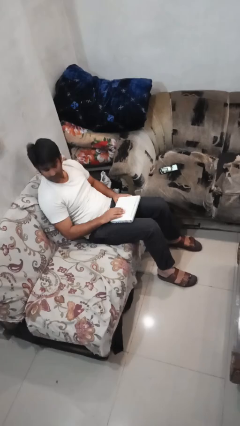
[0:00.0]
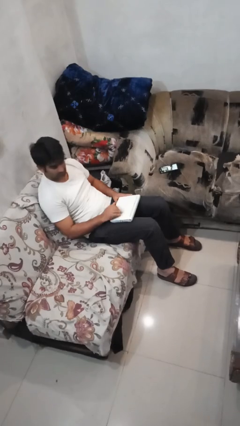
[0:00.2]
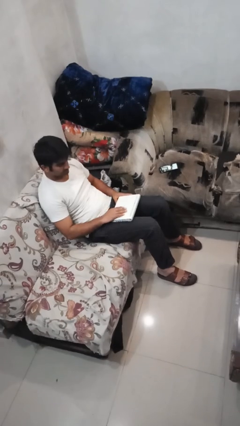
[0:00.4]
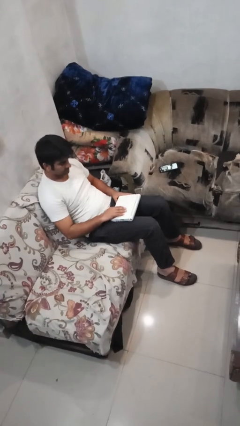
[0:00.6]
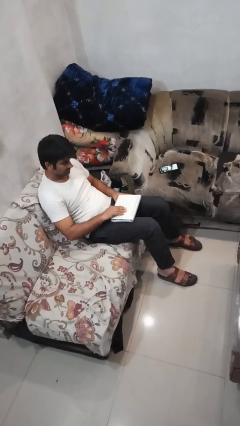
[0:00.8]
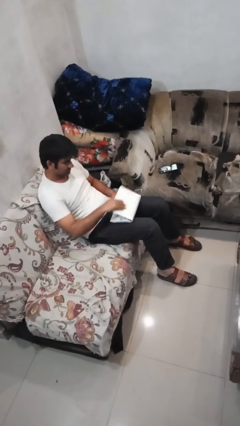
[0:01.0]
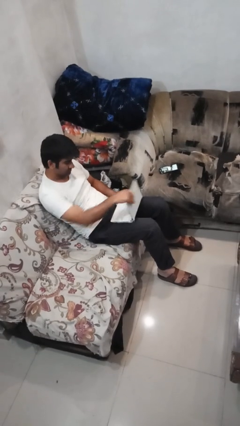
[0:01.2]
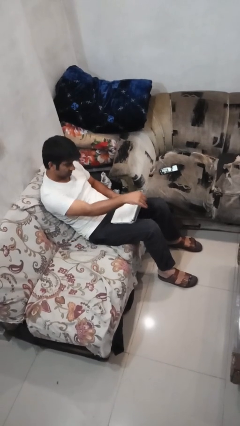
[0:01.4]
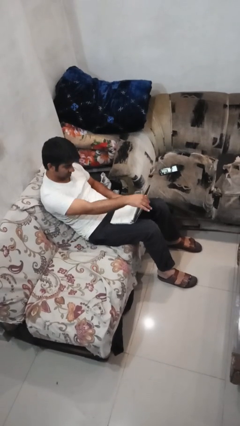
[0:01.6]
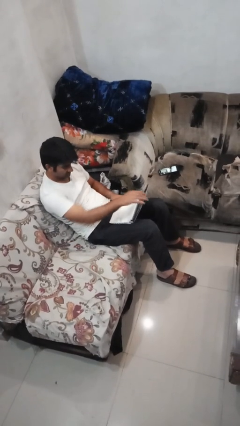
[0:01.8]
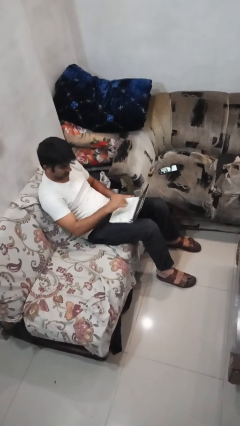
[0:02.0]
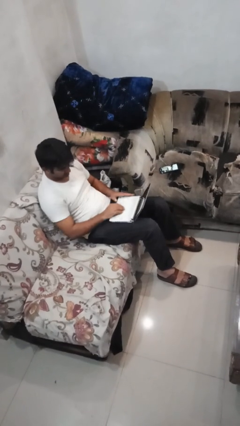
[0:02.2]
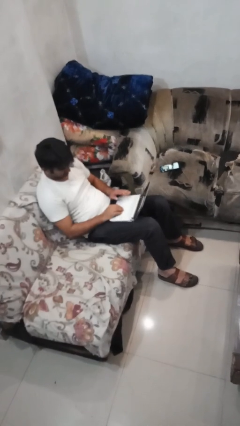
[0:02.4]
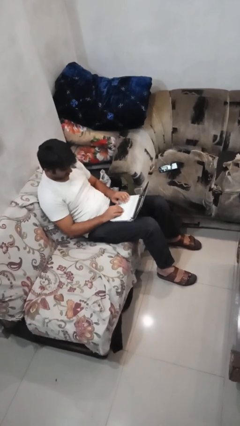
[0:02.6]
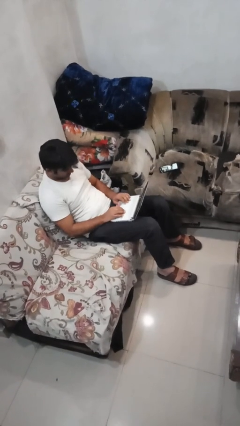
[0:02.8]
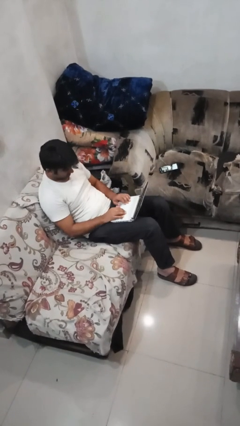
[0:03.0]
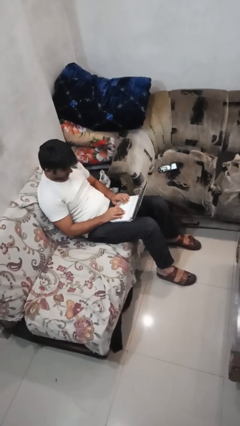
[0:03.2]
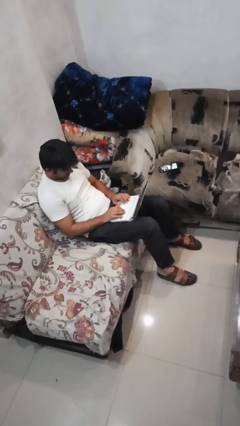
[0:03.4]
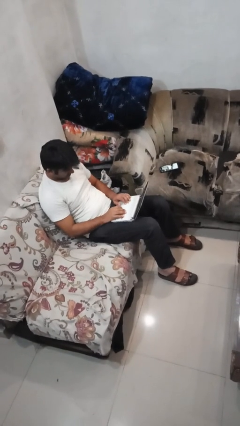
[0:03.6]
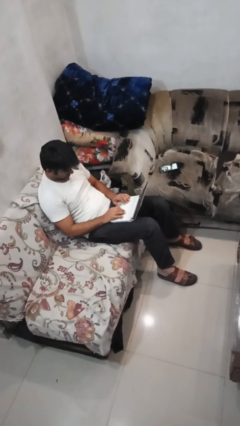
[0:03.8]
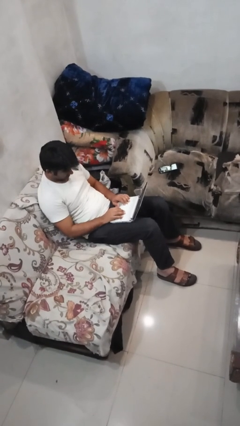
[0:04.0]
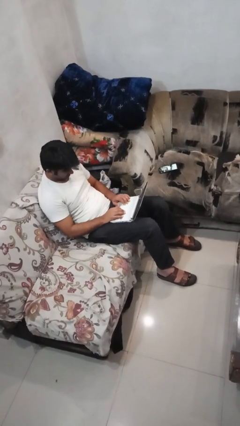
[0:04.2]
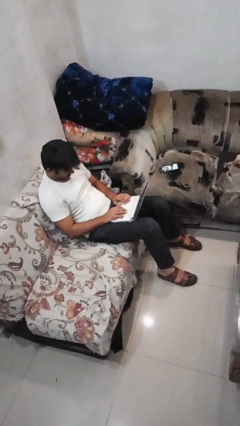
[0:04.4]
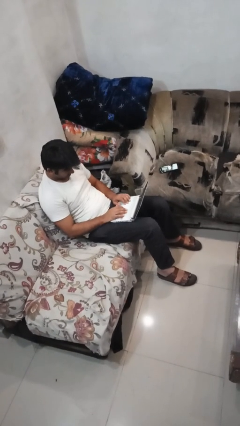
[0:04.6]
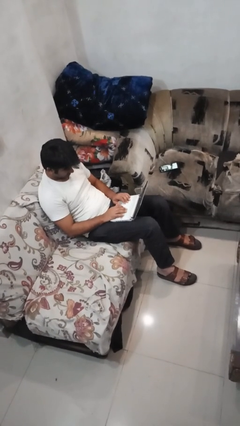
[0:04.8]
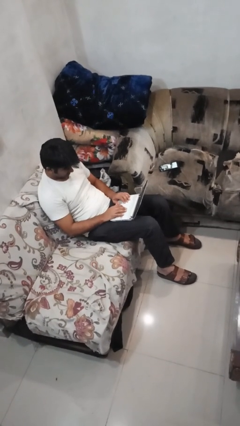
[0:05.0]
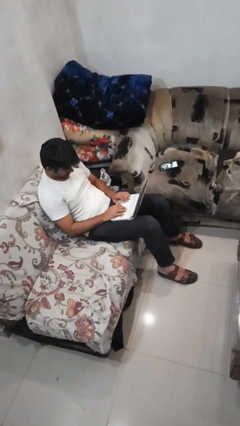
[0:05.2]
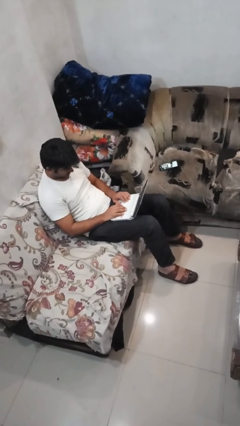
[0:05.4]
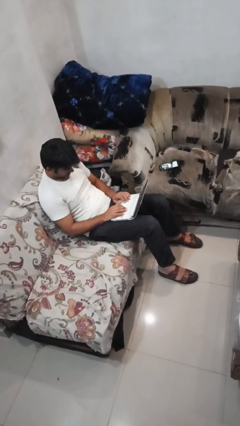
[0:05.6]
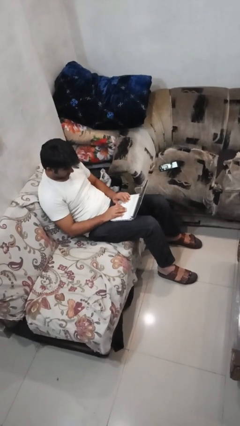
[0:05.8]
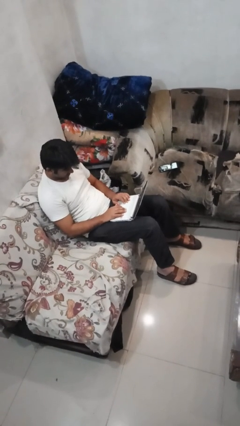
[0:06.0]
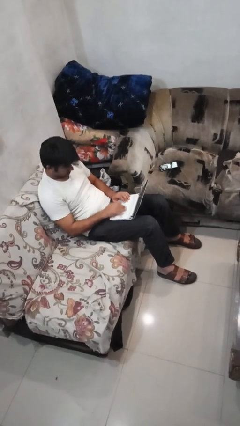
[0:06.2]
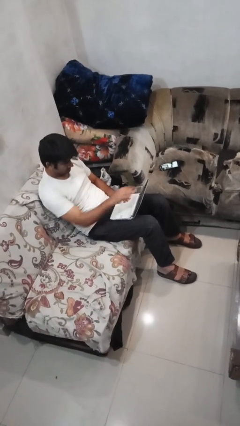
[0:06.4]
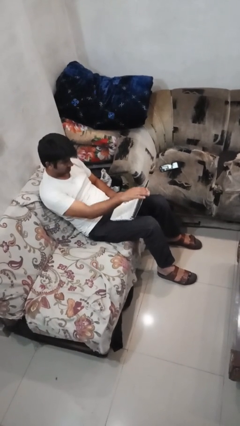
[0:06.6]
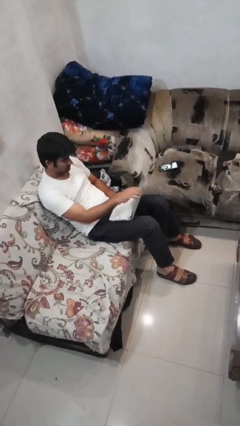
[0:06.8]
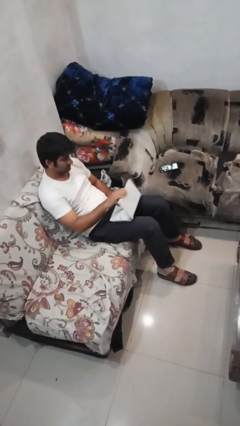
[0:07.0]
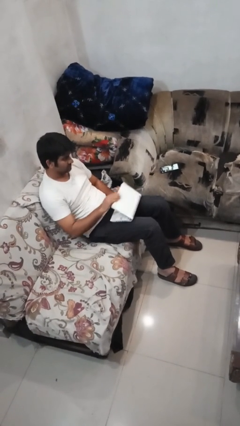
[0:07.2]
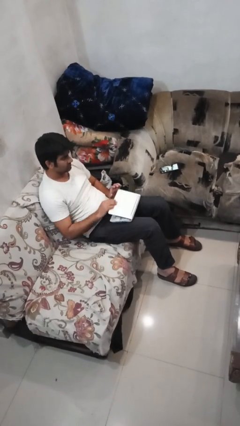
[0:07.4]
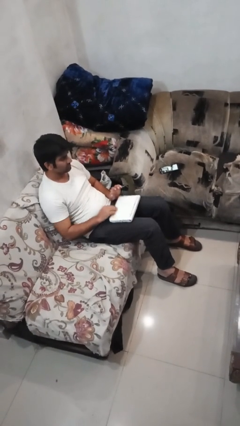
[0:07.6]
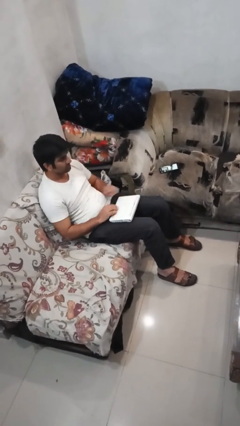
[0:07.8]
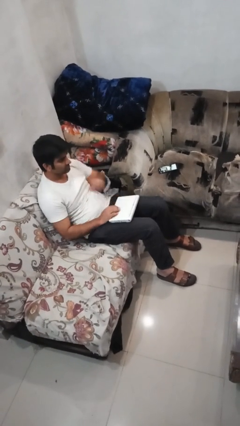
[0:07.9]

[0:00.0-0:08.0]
person interacts with laptop

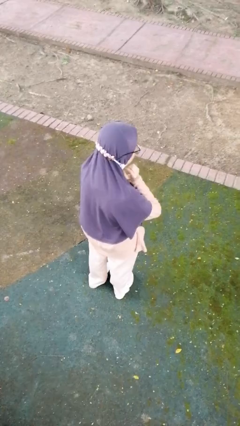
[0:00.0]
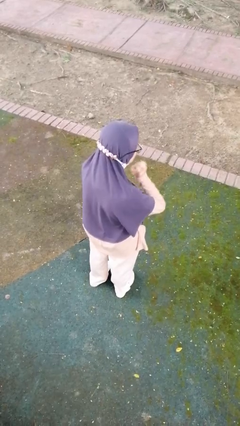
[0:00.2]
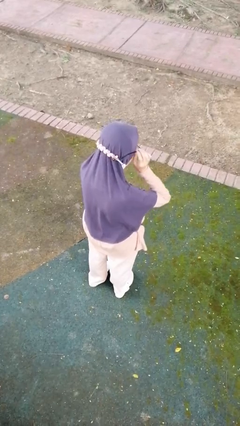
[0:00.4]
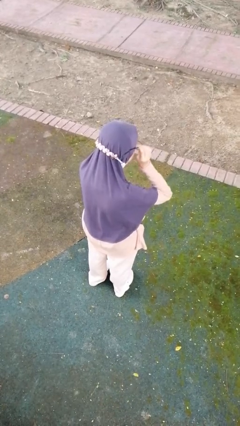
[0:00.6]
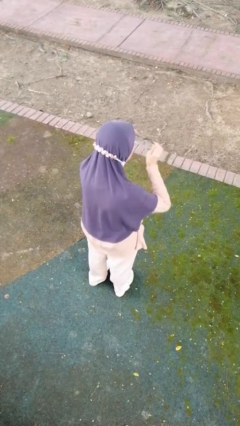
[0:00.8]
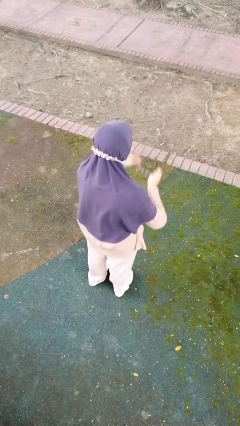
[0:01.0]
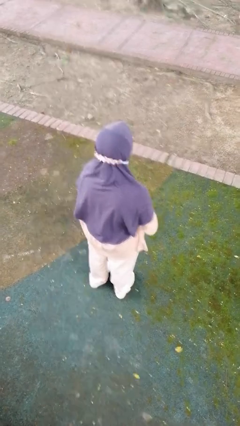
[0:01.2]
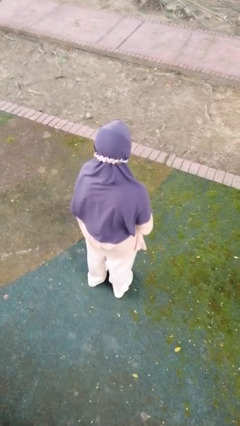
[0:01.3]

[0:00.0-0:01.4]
person takes off glasses

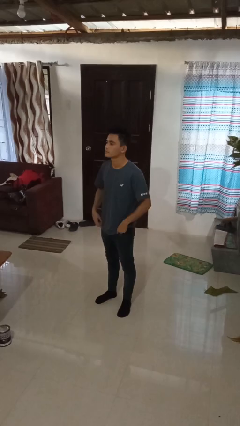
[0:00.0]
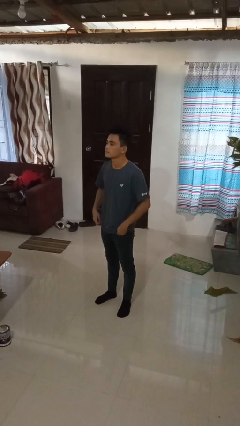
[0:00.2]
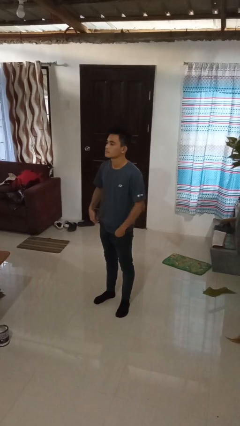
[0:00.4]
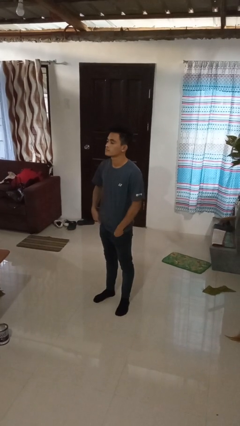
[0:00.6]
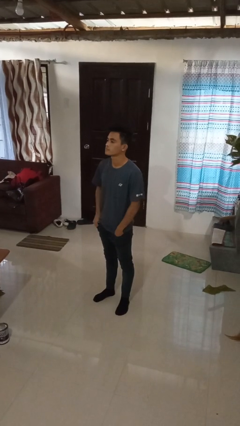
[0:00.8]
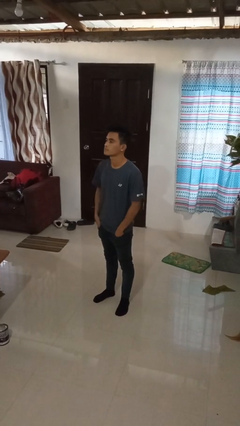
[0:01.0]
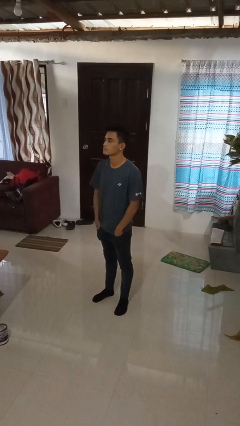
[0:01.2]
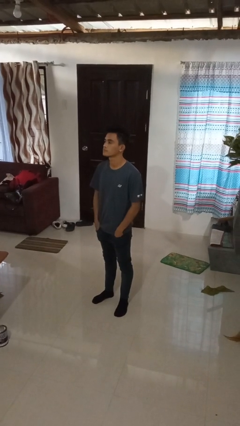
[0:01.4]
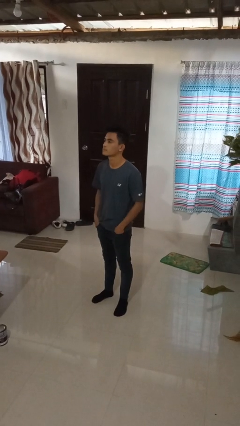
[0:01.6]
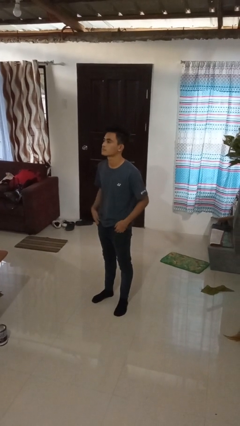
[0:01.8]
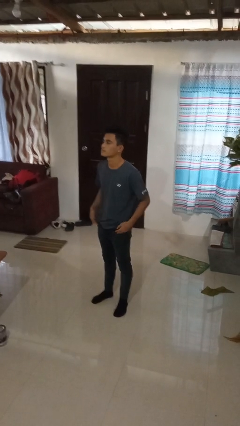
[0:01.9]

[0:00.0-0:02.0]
person puts hands in back pockets

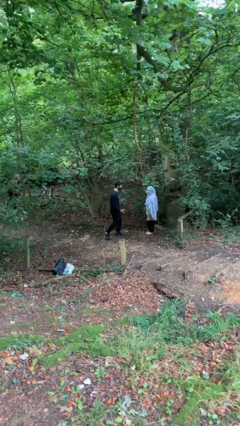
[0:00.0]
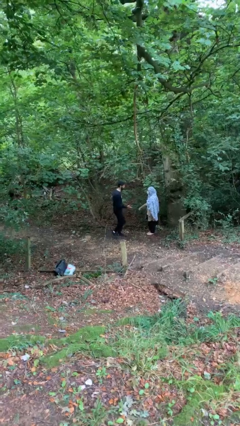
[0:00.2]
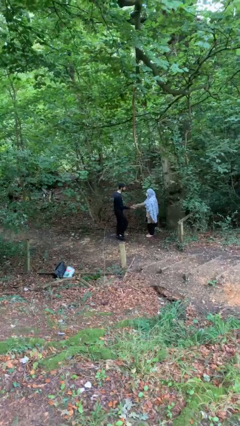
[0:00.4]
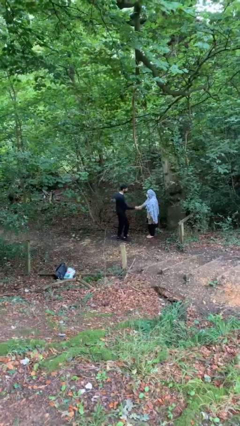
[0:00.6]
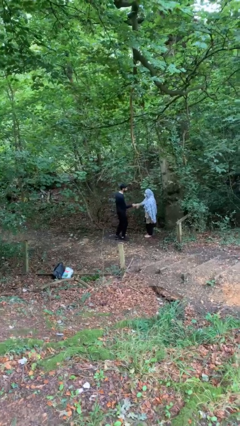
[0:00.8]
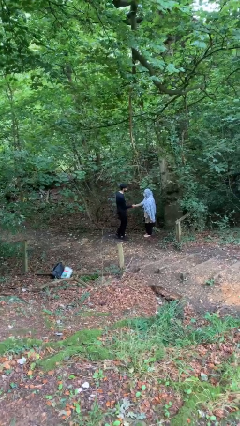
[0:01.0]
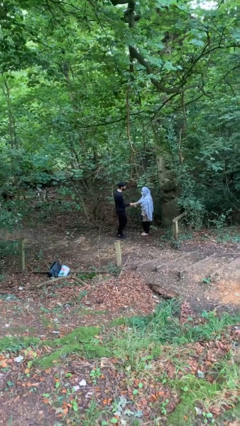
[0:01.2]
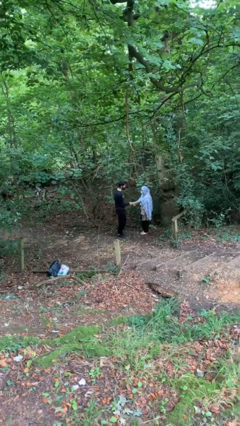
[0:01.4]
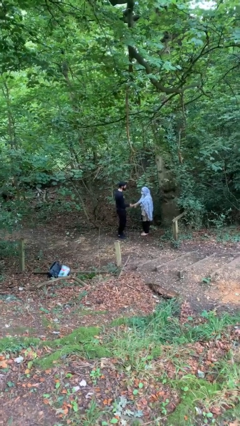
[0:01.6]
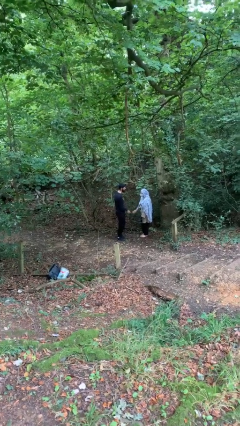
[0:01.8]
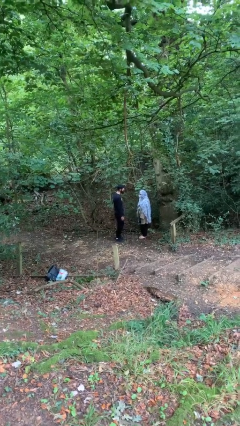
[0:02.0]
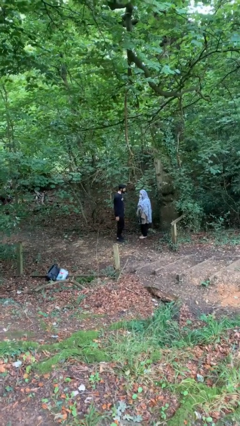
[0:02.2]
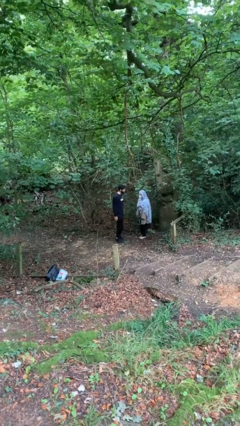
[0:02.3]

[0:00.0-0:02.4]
person shakes hand

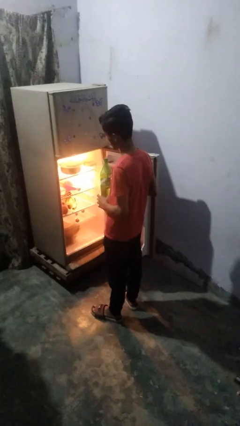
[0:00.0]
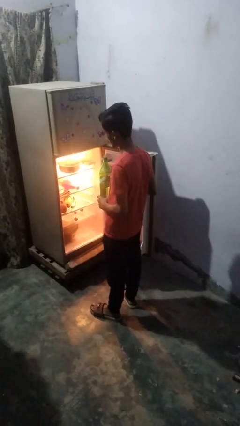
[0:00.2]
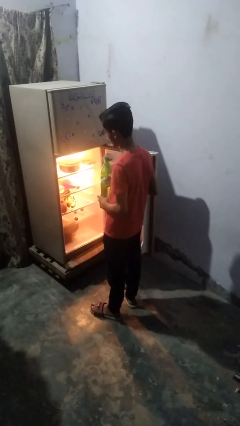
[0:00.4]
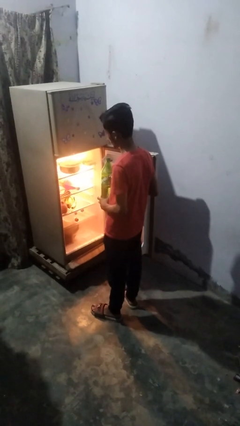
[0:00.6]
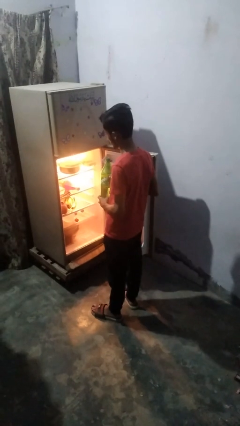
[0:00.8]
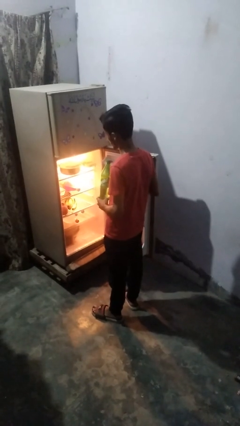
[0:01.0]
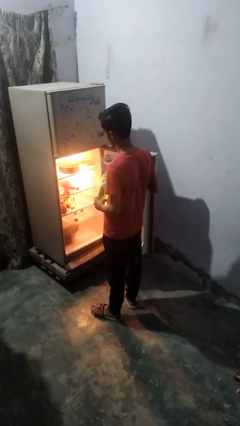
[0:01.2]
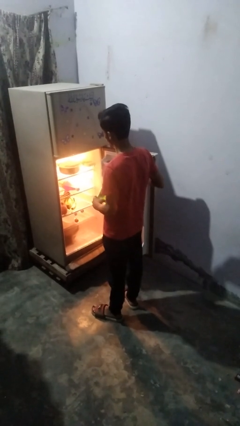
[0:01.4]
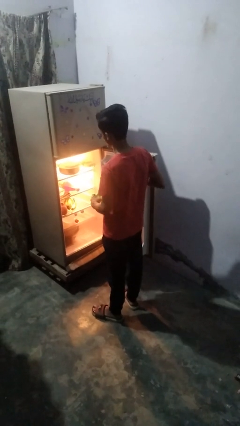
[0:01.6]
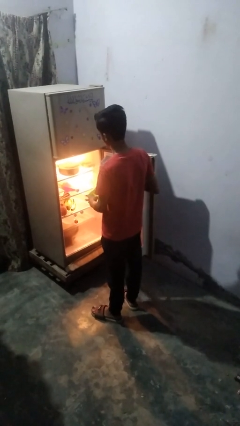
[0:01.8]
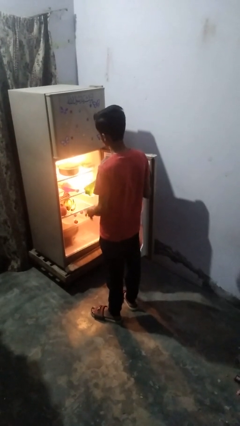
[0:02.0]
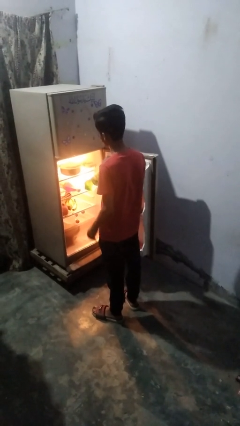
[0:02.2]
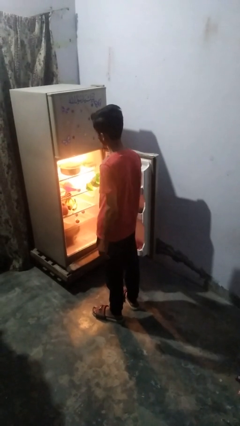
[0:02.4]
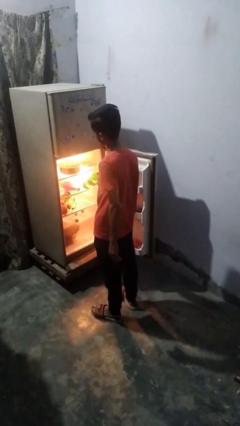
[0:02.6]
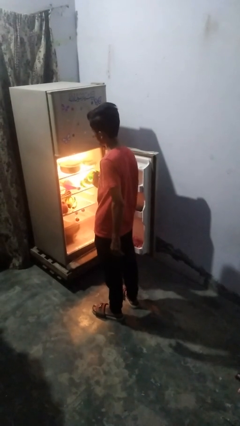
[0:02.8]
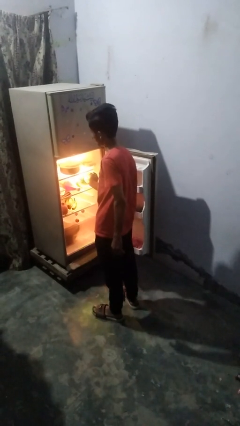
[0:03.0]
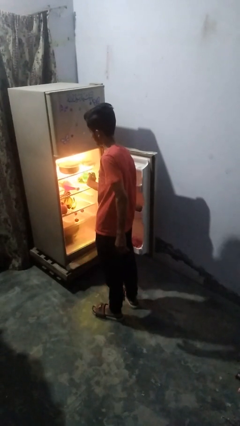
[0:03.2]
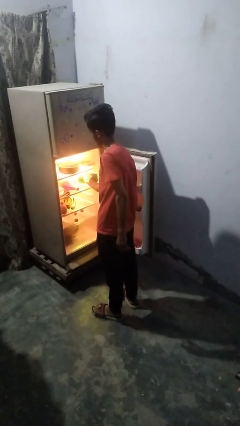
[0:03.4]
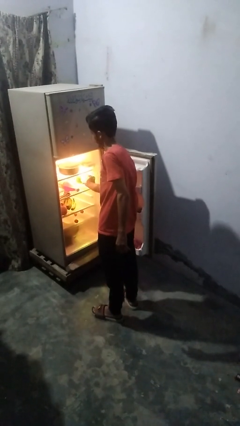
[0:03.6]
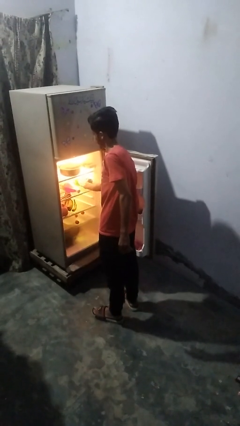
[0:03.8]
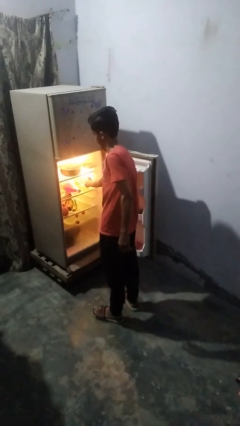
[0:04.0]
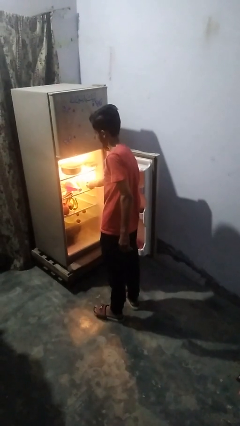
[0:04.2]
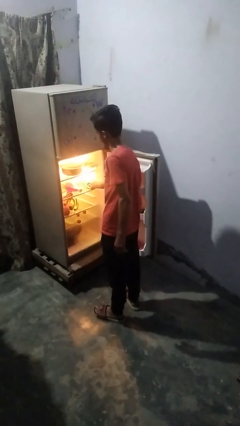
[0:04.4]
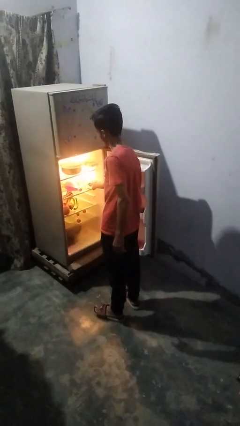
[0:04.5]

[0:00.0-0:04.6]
person takes object from refrigerator
